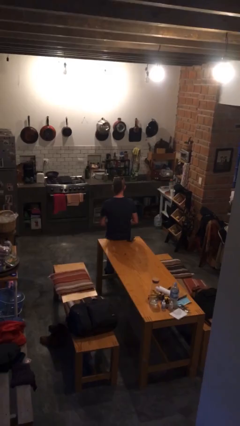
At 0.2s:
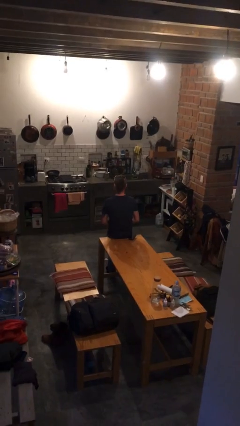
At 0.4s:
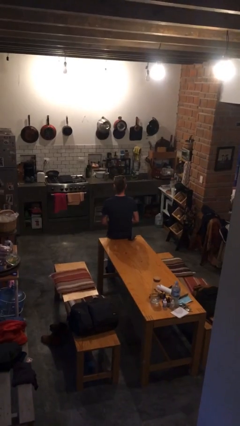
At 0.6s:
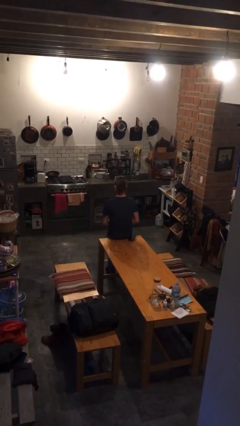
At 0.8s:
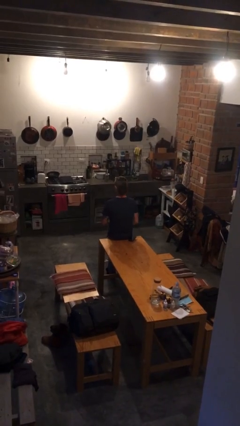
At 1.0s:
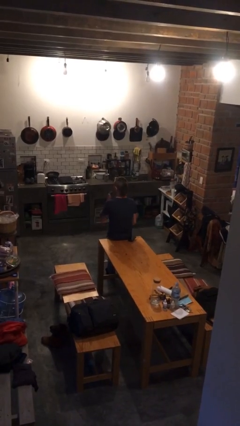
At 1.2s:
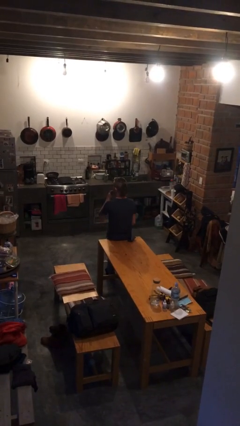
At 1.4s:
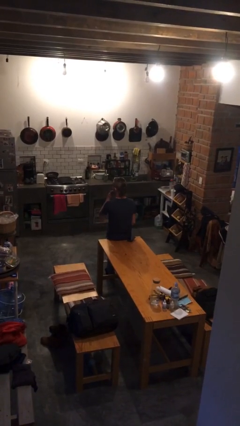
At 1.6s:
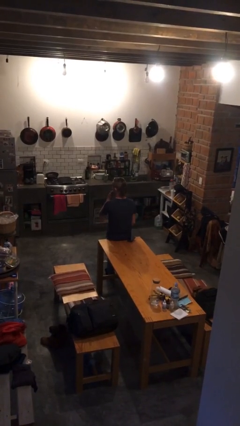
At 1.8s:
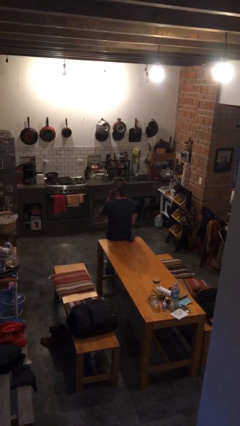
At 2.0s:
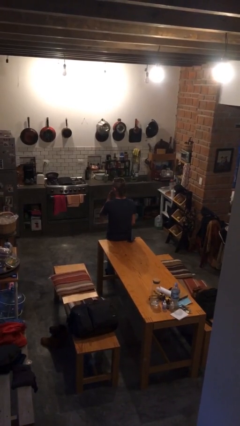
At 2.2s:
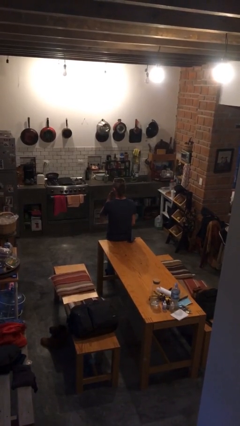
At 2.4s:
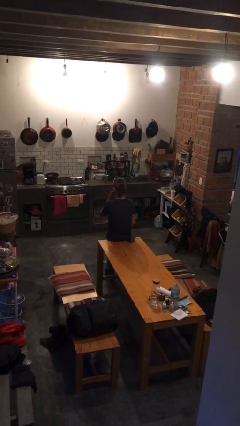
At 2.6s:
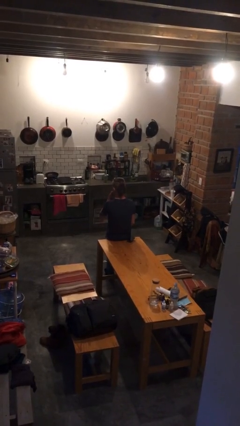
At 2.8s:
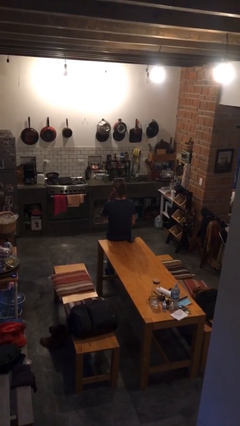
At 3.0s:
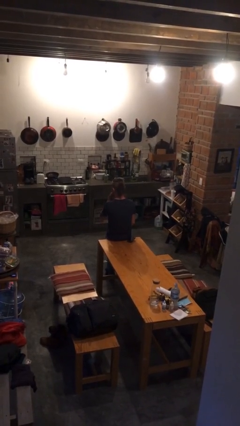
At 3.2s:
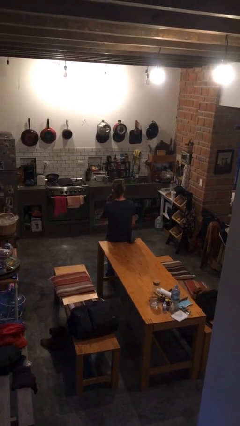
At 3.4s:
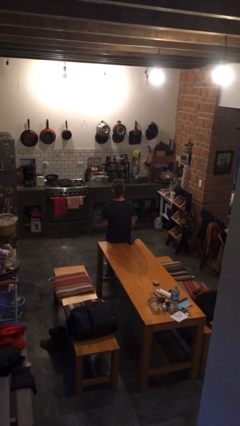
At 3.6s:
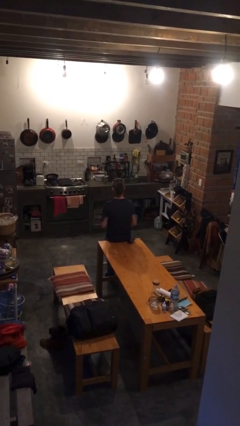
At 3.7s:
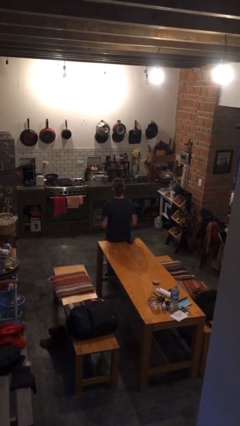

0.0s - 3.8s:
person applies lip makeup

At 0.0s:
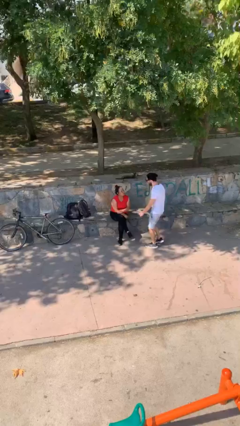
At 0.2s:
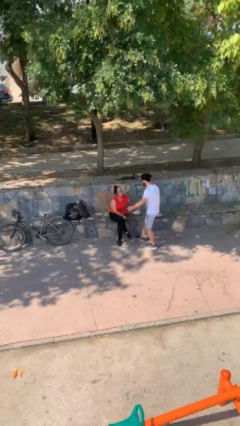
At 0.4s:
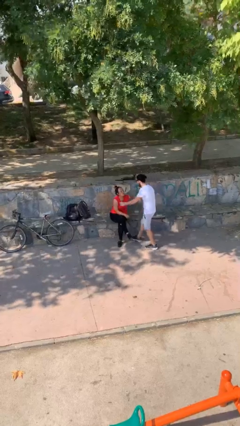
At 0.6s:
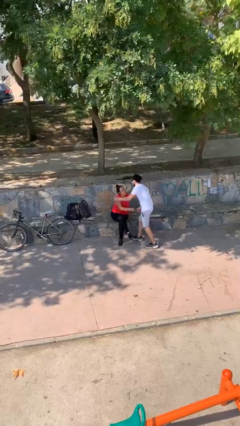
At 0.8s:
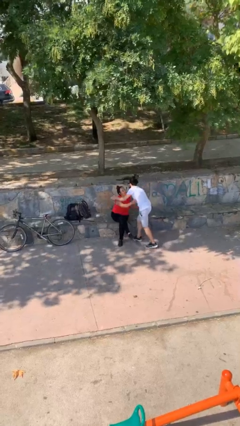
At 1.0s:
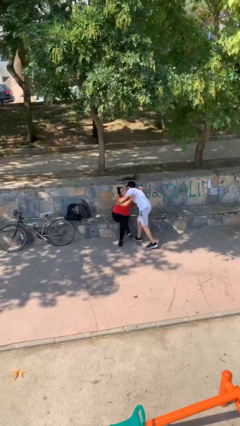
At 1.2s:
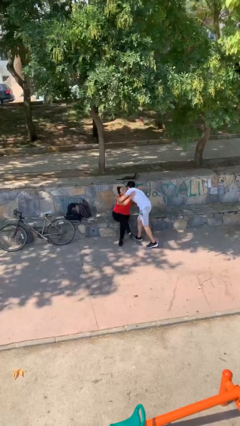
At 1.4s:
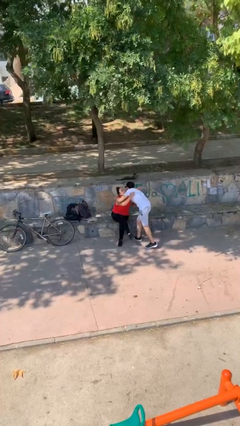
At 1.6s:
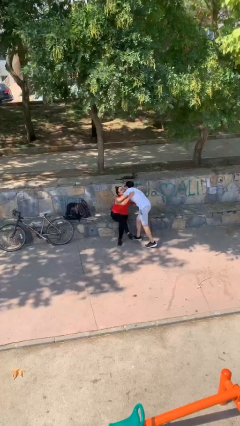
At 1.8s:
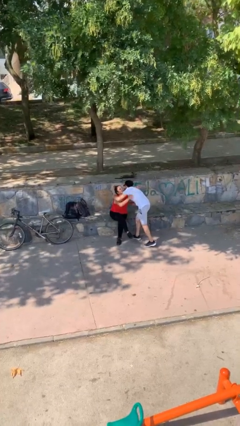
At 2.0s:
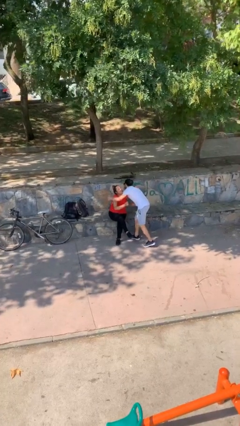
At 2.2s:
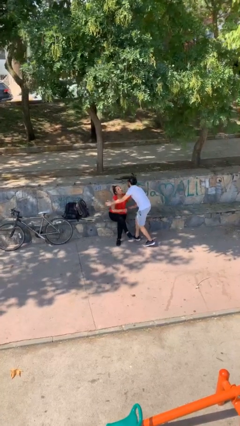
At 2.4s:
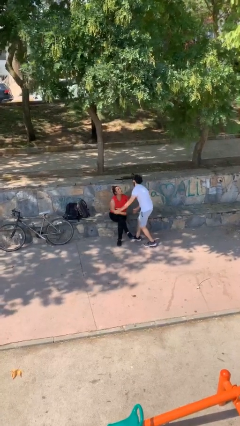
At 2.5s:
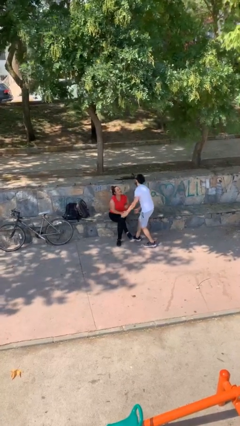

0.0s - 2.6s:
person embraces person

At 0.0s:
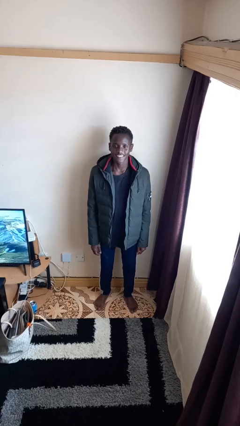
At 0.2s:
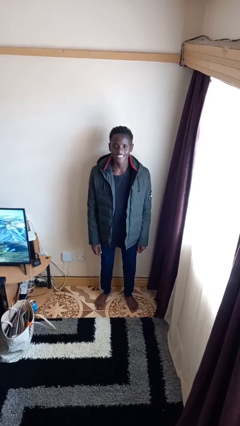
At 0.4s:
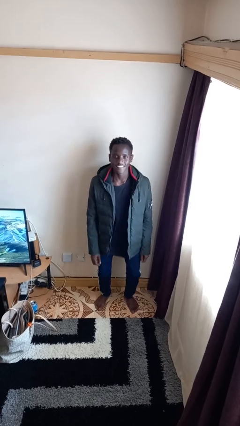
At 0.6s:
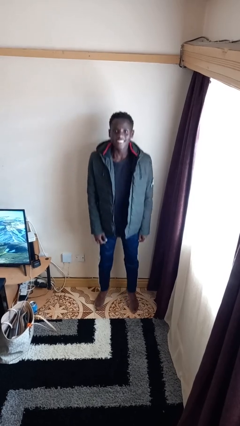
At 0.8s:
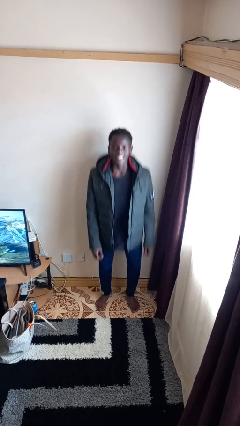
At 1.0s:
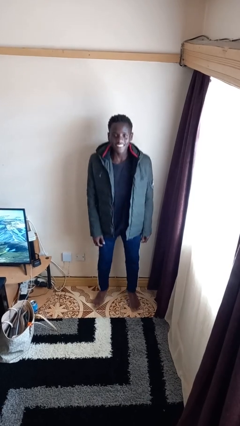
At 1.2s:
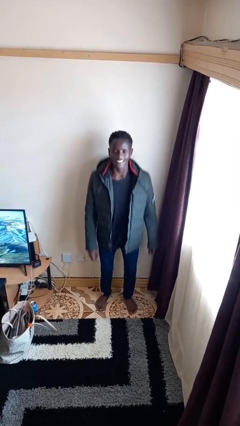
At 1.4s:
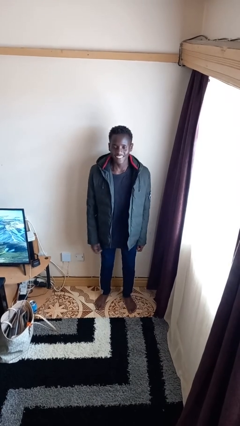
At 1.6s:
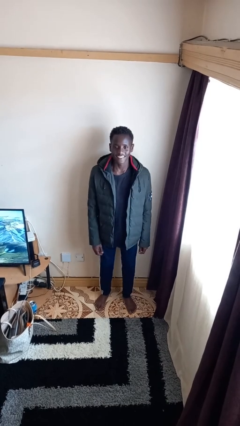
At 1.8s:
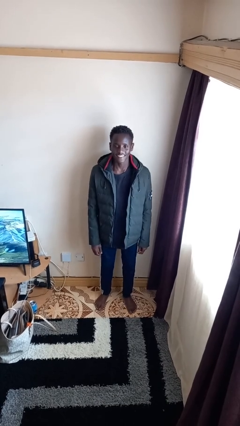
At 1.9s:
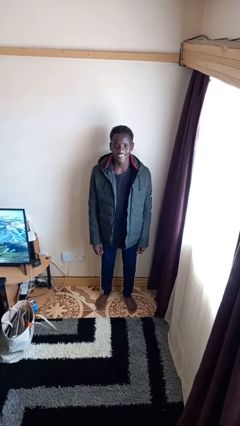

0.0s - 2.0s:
person jumps

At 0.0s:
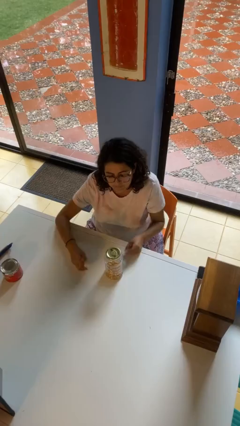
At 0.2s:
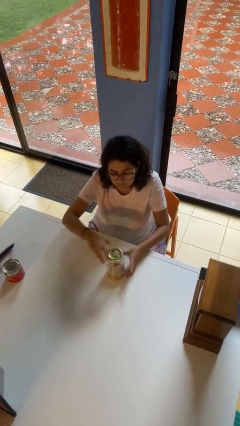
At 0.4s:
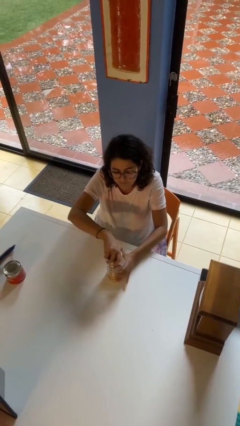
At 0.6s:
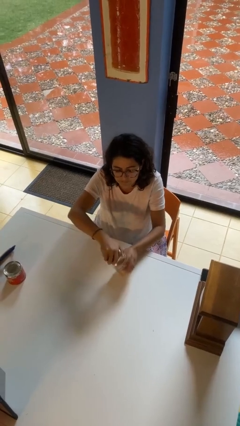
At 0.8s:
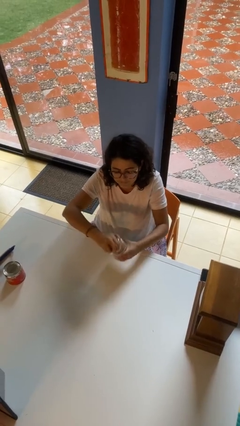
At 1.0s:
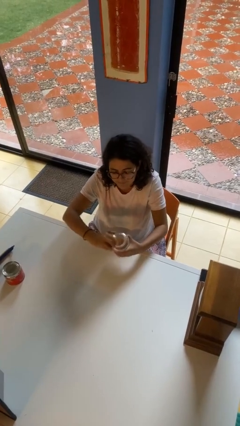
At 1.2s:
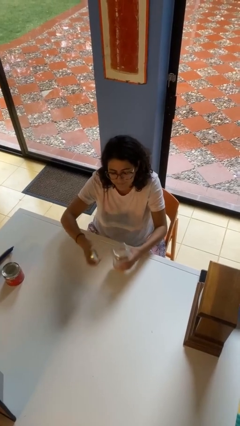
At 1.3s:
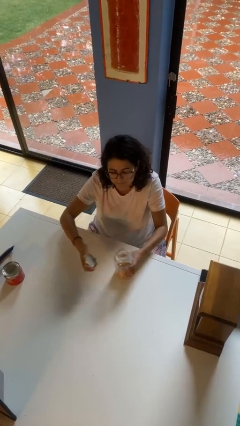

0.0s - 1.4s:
person opens jar

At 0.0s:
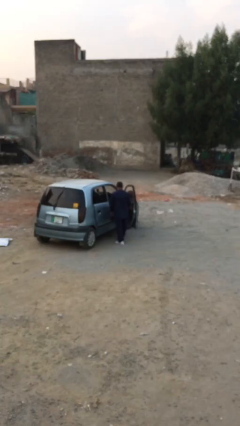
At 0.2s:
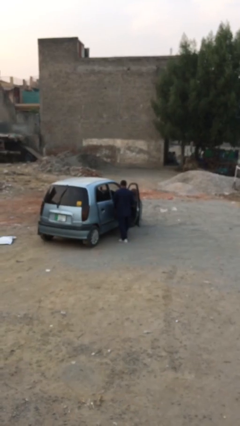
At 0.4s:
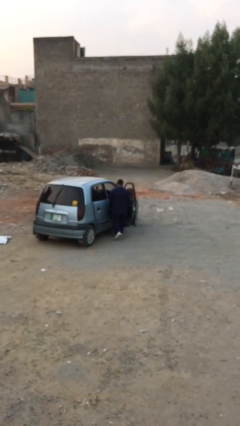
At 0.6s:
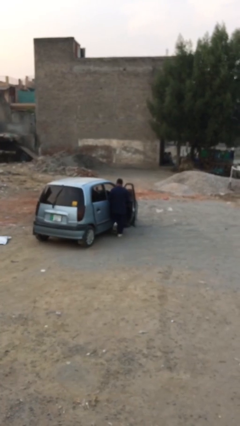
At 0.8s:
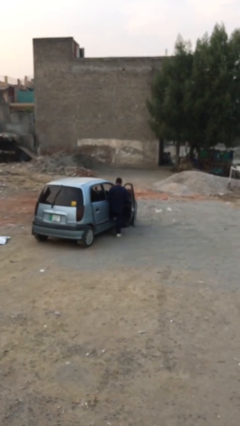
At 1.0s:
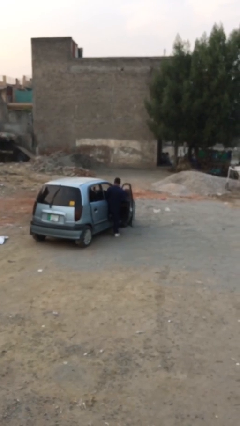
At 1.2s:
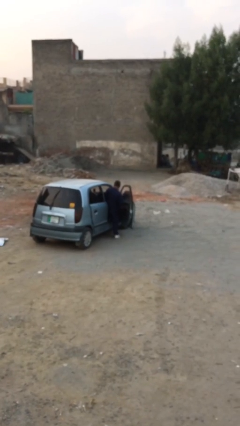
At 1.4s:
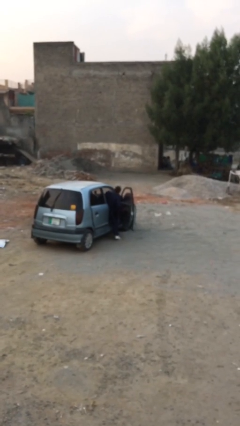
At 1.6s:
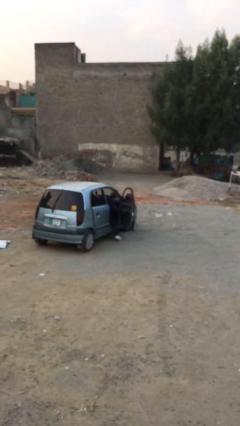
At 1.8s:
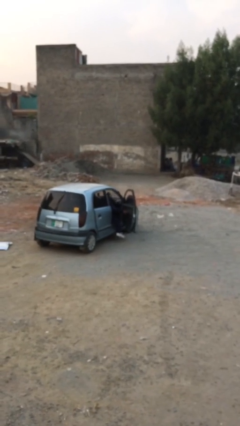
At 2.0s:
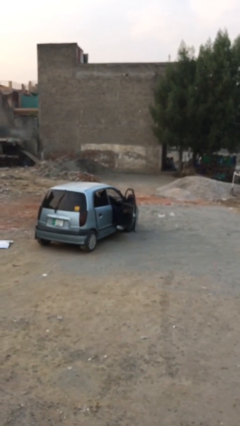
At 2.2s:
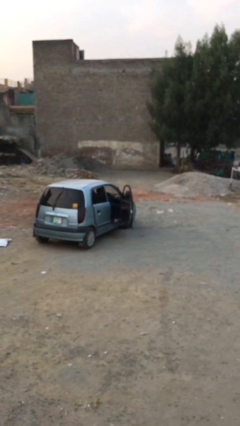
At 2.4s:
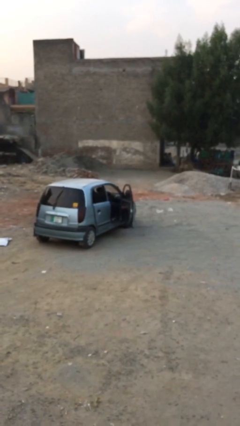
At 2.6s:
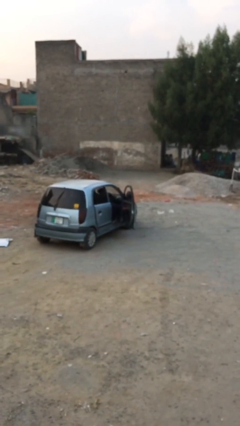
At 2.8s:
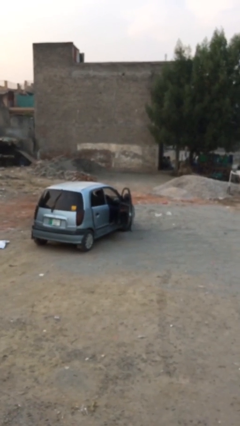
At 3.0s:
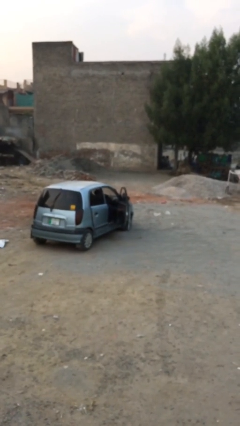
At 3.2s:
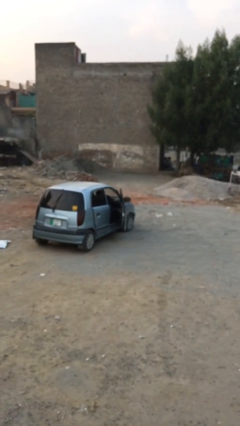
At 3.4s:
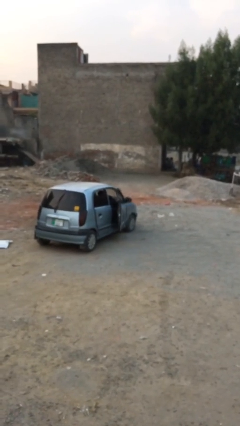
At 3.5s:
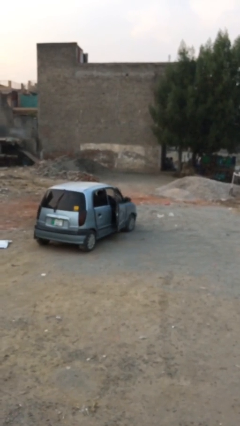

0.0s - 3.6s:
person enters car

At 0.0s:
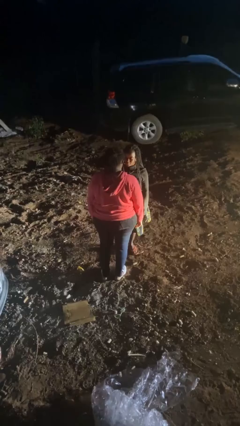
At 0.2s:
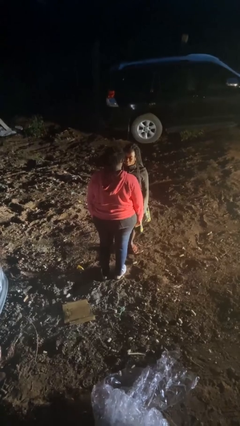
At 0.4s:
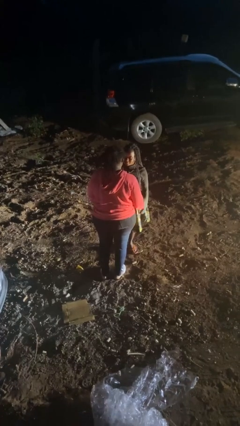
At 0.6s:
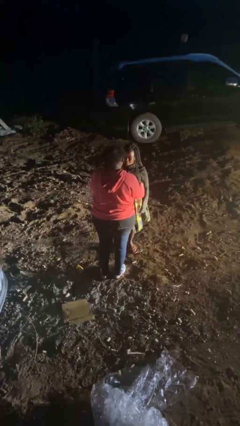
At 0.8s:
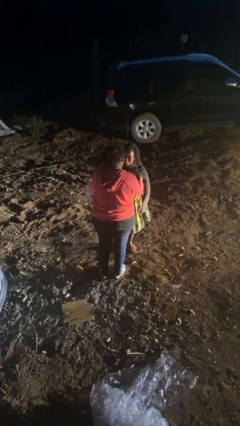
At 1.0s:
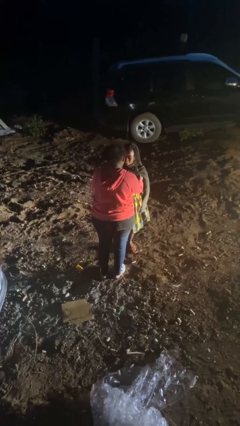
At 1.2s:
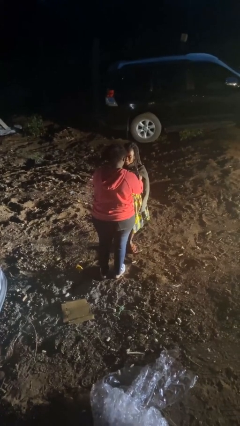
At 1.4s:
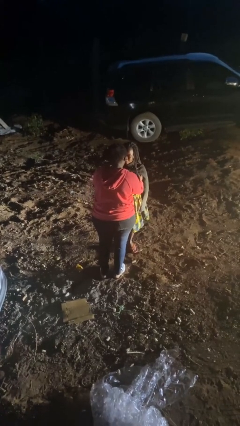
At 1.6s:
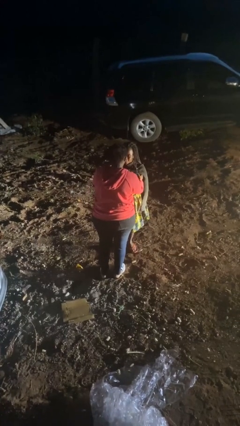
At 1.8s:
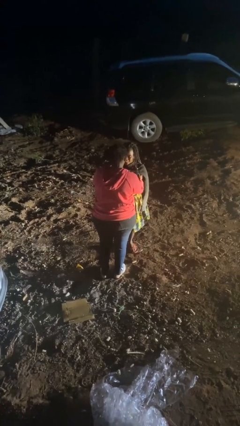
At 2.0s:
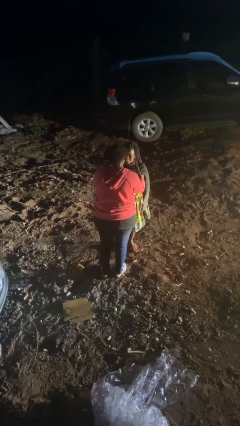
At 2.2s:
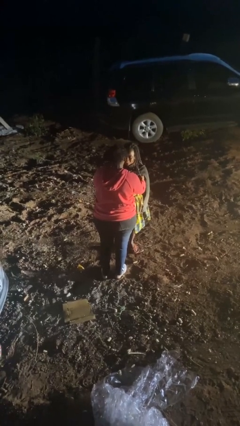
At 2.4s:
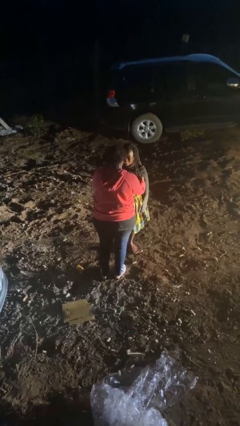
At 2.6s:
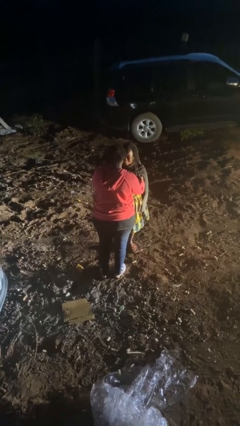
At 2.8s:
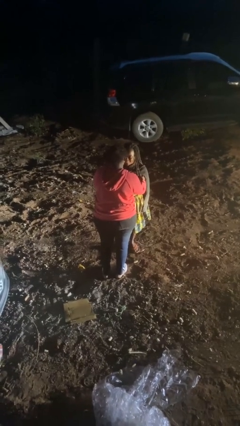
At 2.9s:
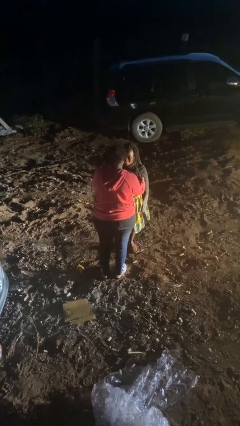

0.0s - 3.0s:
person tickles person

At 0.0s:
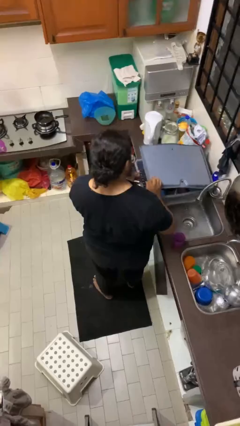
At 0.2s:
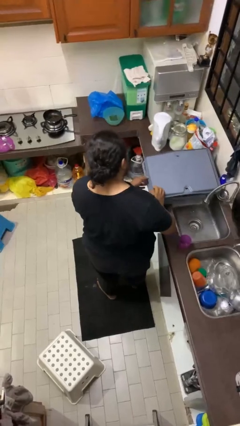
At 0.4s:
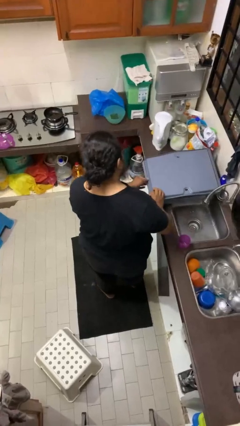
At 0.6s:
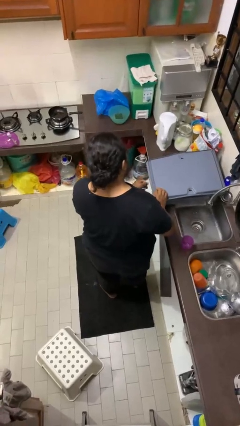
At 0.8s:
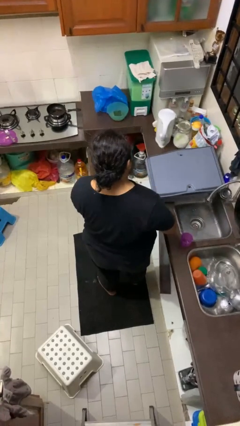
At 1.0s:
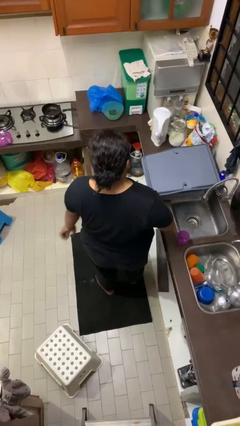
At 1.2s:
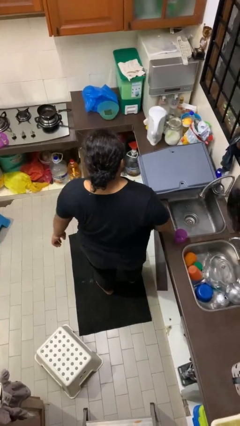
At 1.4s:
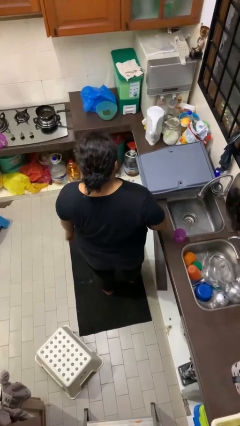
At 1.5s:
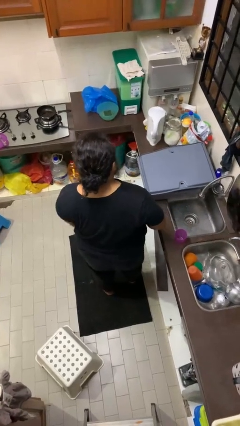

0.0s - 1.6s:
person closes dishwasher
